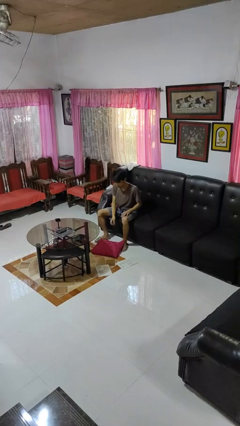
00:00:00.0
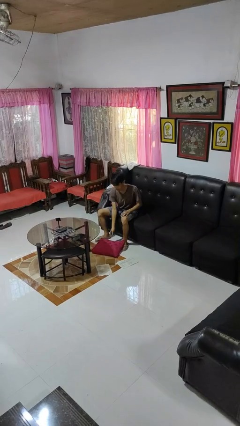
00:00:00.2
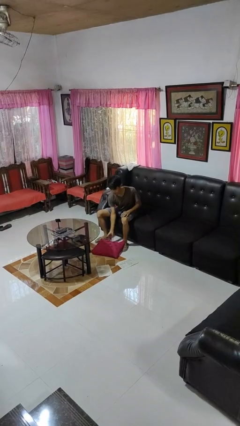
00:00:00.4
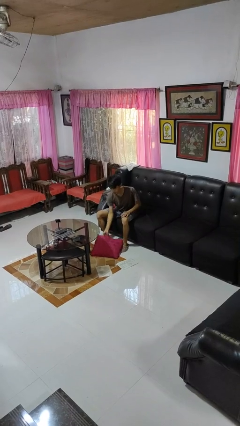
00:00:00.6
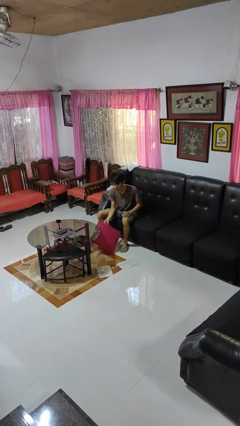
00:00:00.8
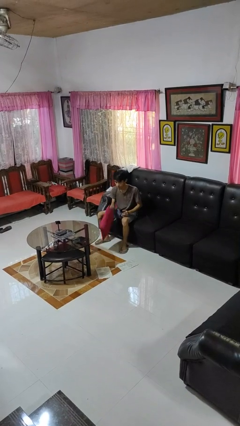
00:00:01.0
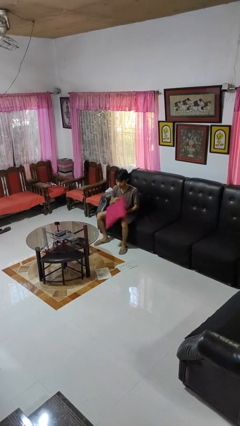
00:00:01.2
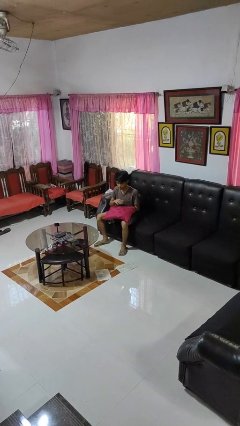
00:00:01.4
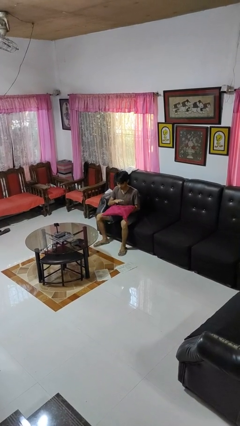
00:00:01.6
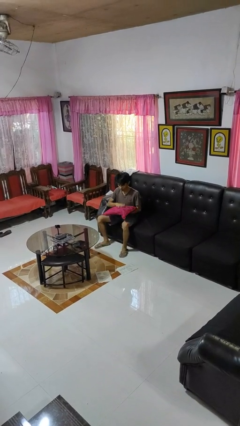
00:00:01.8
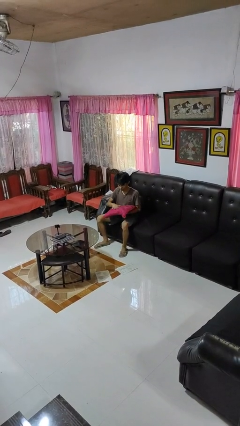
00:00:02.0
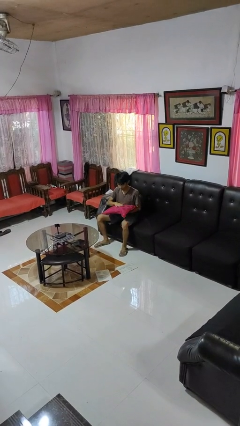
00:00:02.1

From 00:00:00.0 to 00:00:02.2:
person picks up object from floor

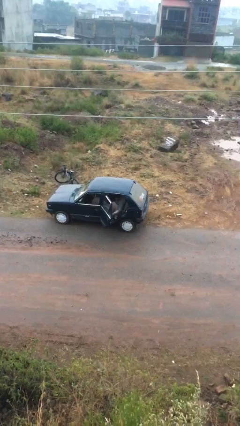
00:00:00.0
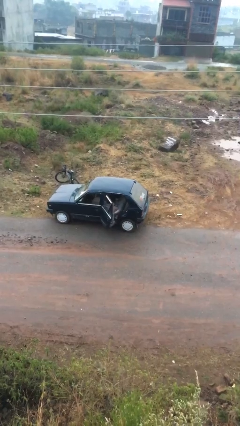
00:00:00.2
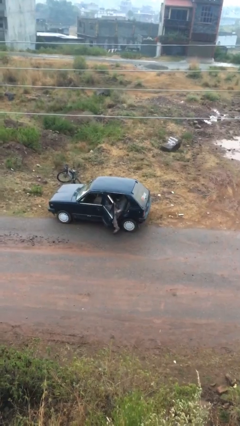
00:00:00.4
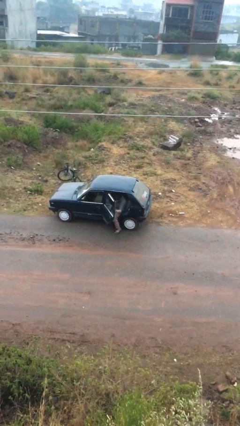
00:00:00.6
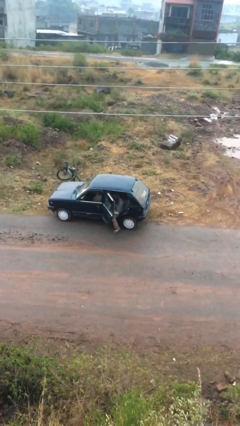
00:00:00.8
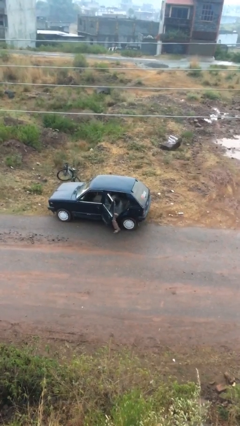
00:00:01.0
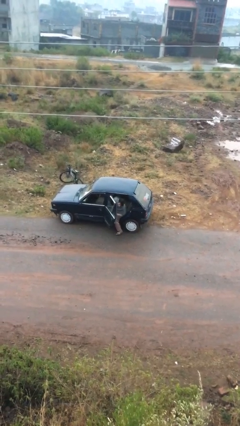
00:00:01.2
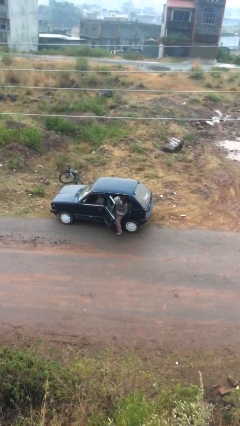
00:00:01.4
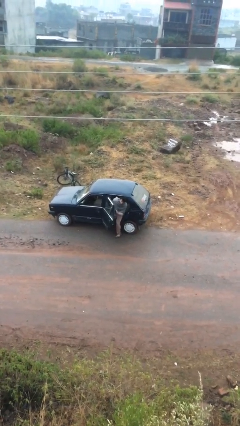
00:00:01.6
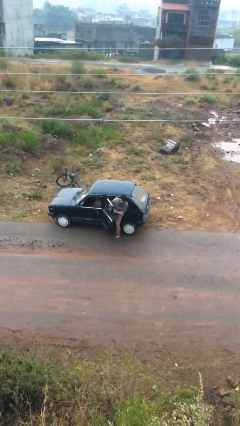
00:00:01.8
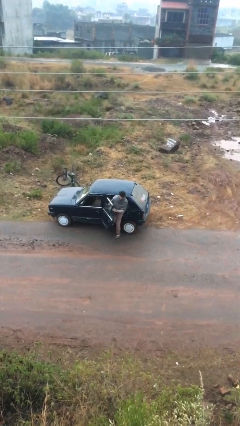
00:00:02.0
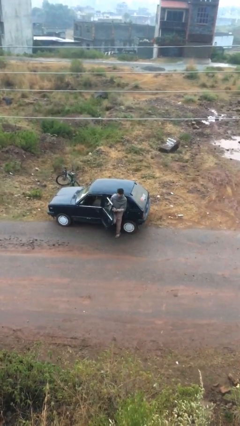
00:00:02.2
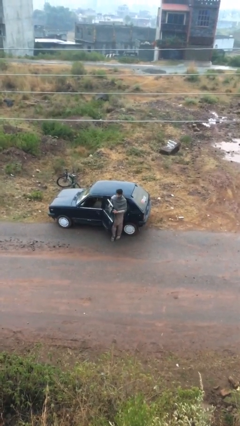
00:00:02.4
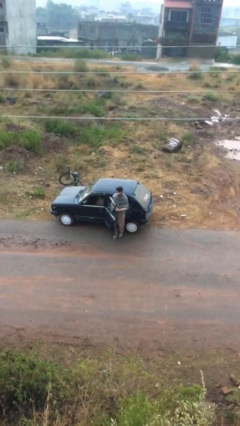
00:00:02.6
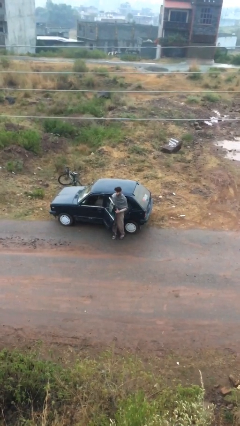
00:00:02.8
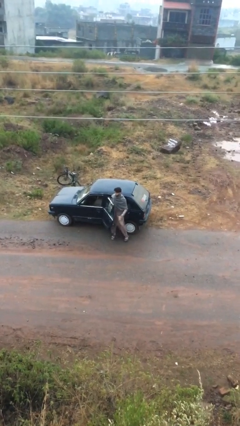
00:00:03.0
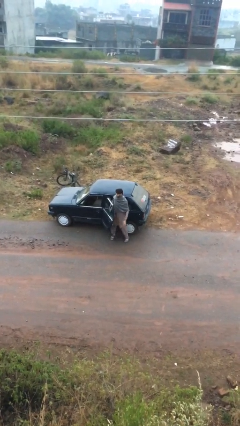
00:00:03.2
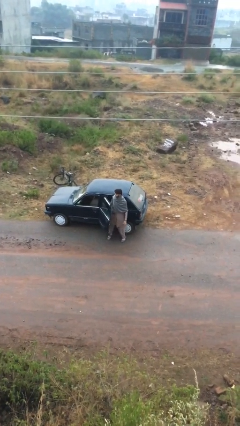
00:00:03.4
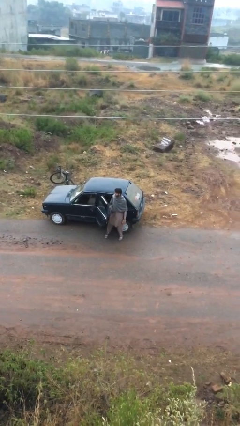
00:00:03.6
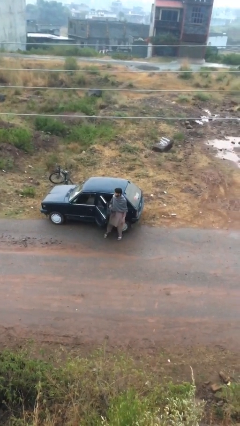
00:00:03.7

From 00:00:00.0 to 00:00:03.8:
person exits car

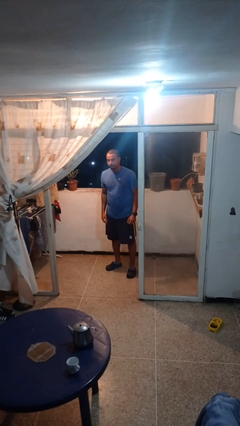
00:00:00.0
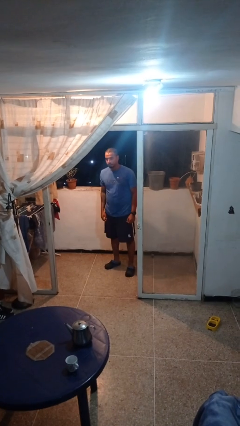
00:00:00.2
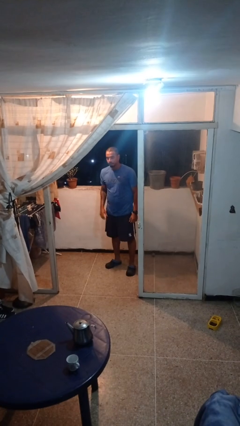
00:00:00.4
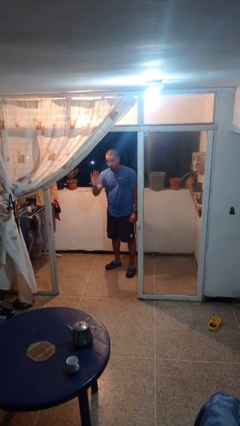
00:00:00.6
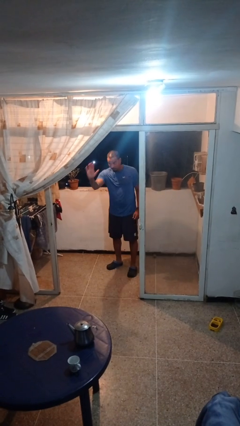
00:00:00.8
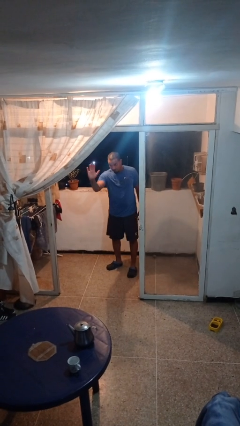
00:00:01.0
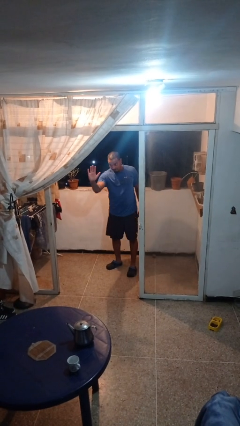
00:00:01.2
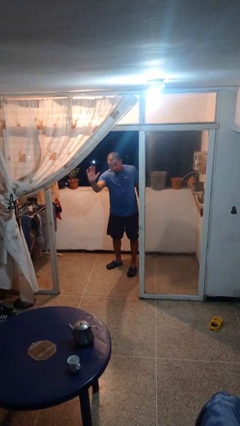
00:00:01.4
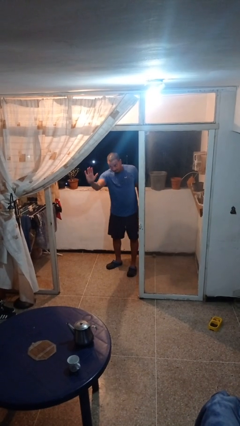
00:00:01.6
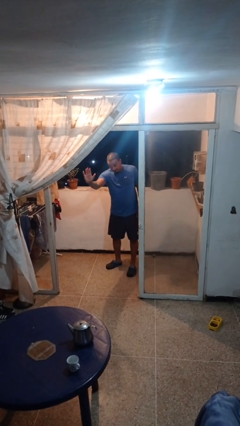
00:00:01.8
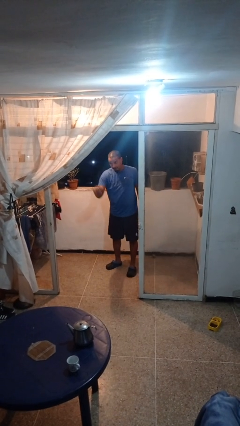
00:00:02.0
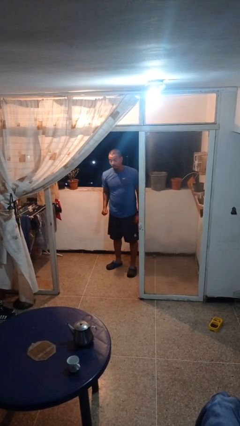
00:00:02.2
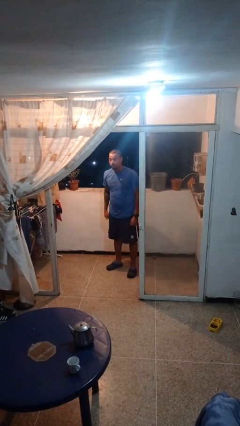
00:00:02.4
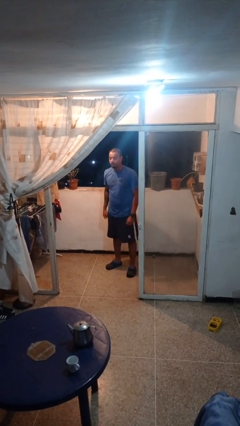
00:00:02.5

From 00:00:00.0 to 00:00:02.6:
person gestures stop

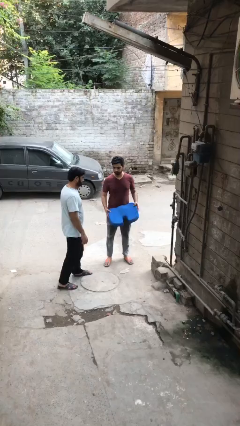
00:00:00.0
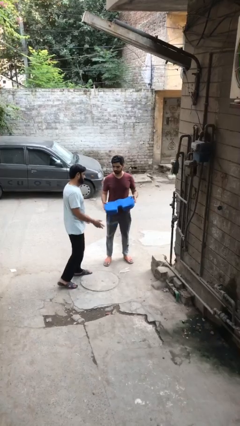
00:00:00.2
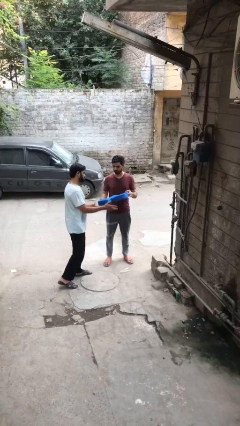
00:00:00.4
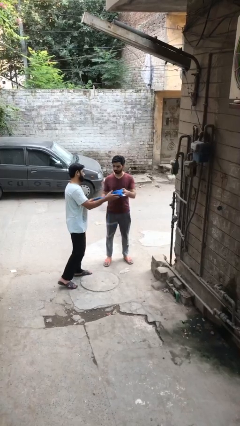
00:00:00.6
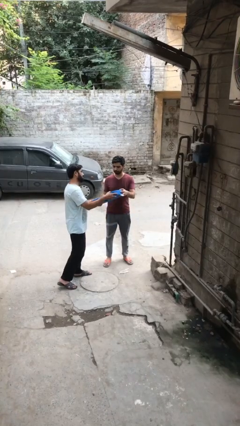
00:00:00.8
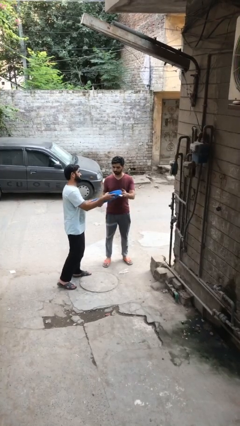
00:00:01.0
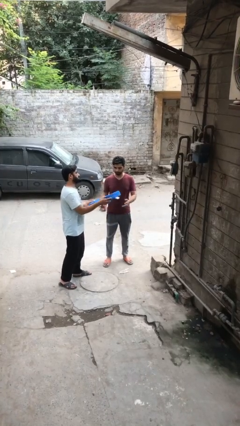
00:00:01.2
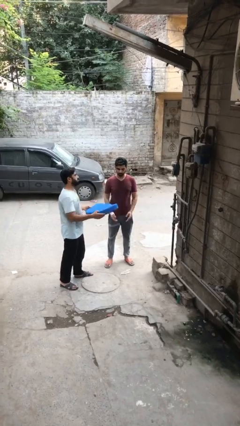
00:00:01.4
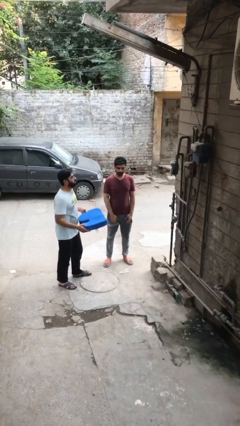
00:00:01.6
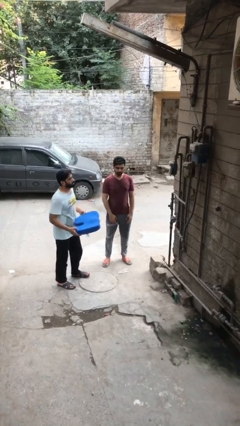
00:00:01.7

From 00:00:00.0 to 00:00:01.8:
person transfers object to person

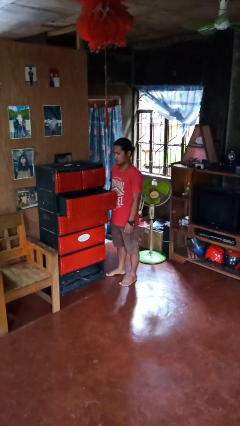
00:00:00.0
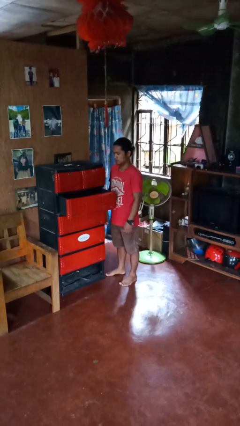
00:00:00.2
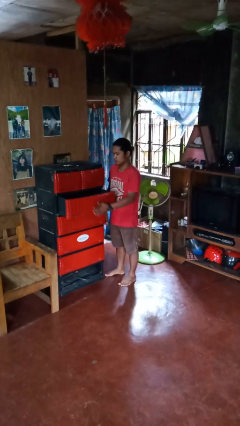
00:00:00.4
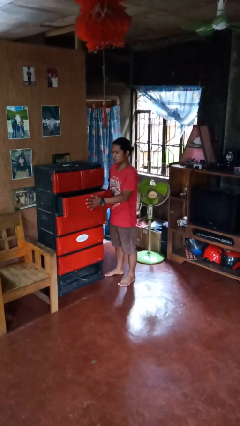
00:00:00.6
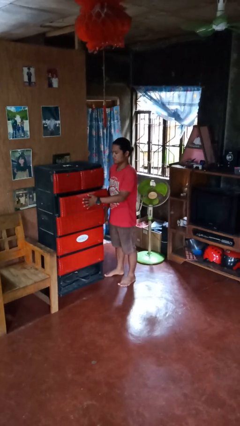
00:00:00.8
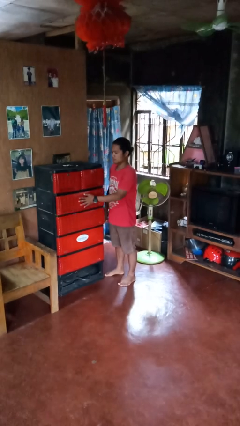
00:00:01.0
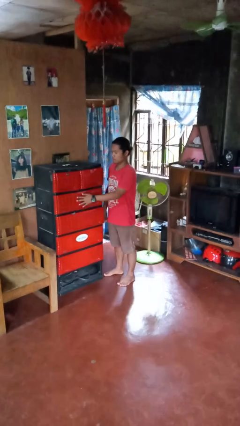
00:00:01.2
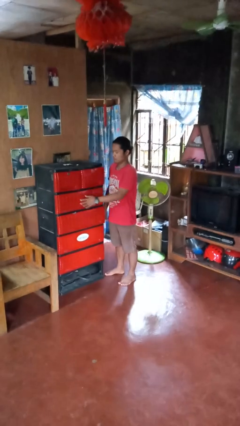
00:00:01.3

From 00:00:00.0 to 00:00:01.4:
person closes dresser drawer

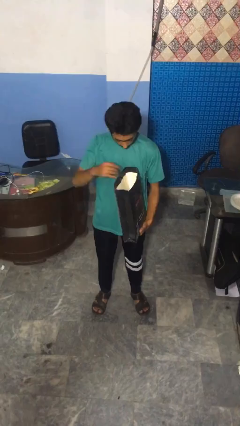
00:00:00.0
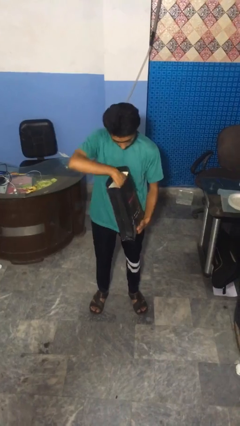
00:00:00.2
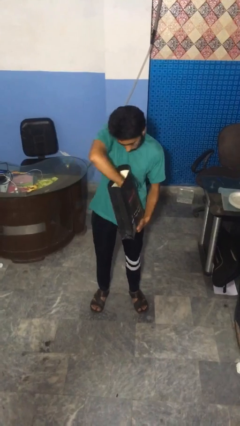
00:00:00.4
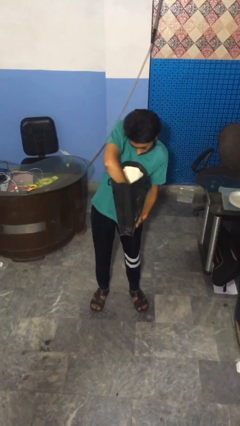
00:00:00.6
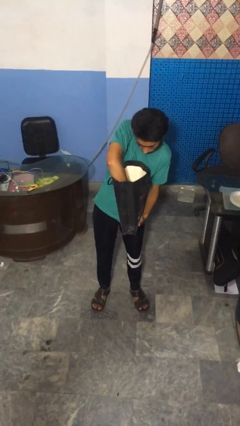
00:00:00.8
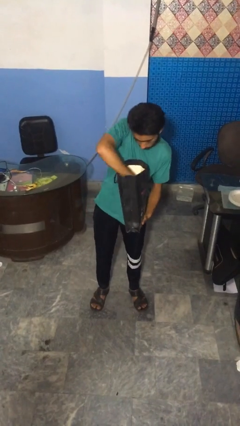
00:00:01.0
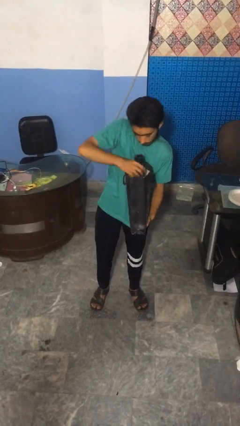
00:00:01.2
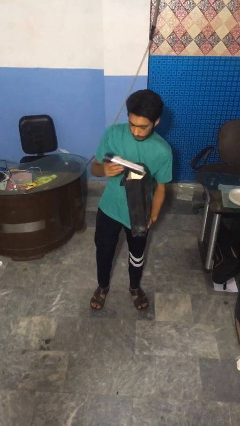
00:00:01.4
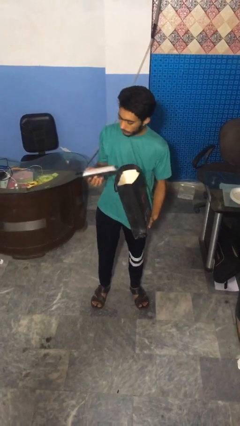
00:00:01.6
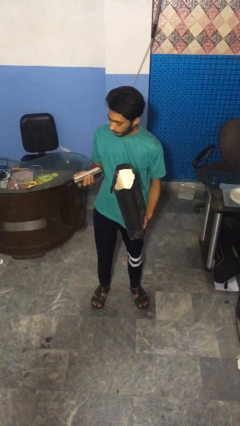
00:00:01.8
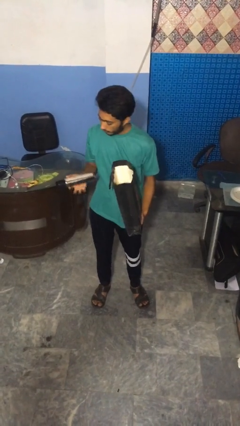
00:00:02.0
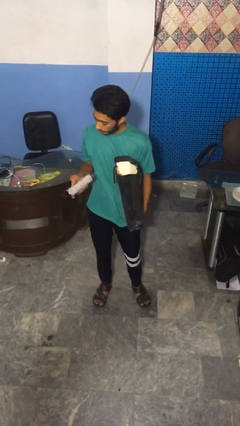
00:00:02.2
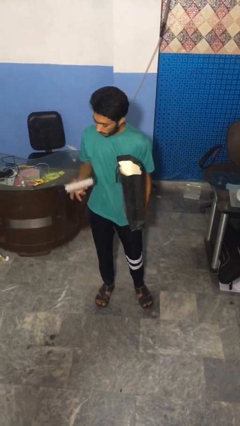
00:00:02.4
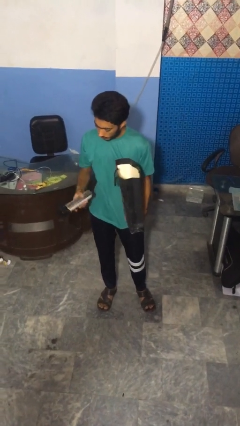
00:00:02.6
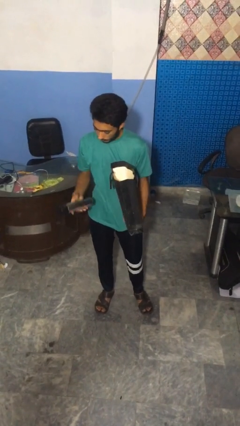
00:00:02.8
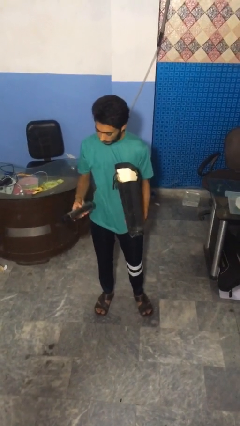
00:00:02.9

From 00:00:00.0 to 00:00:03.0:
person takes object from bag

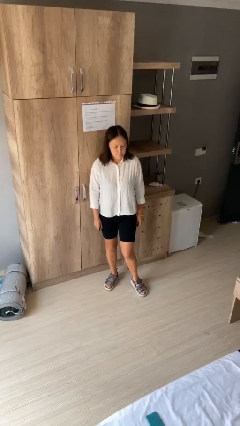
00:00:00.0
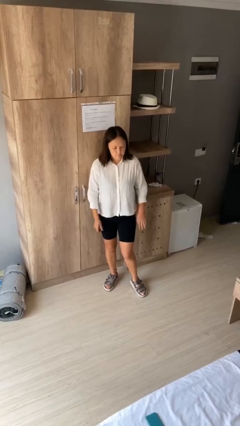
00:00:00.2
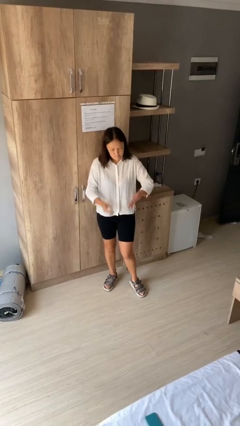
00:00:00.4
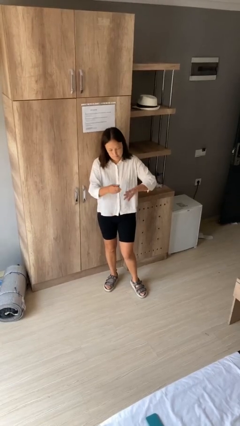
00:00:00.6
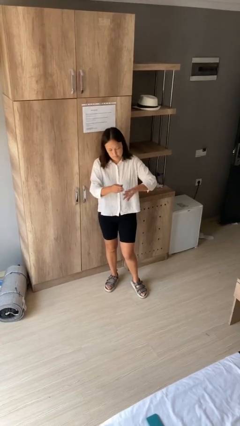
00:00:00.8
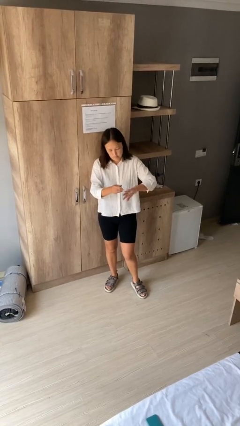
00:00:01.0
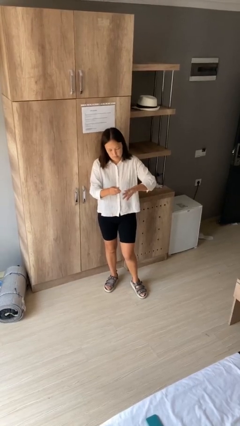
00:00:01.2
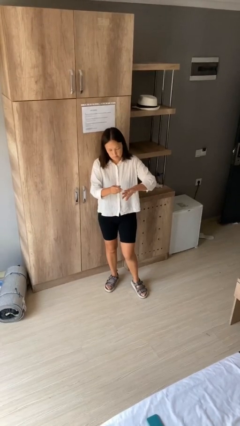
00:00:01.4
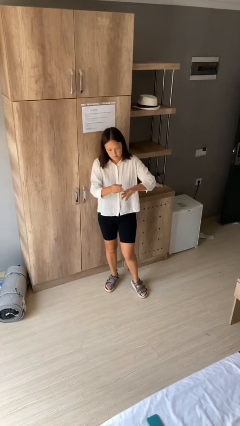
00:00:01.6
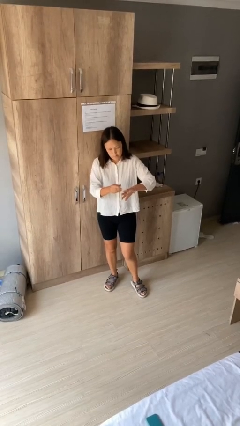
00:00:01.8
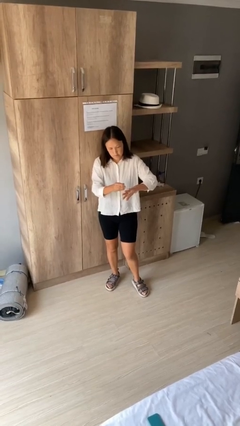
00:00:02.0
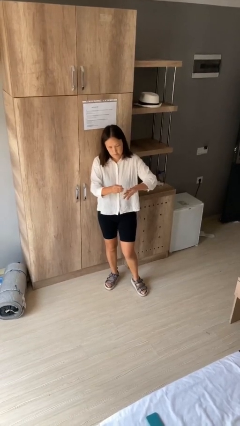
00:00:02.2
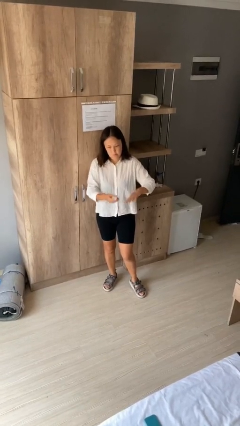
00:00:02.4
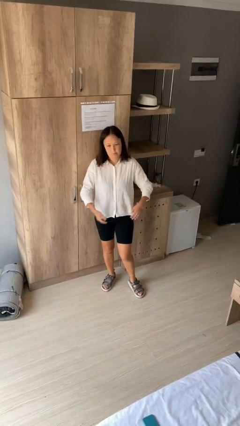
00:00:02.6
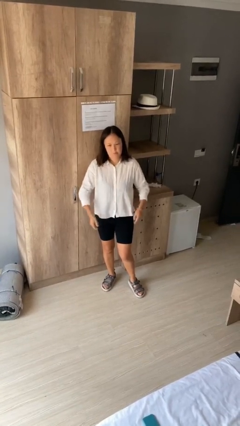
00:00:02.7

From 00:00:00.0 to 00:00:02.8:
person clips fingernails
